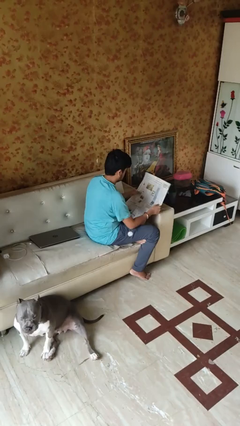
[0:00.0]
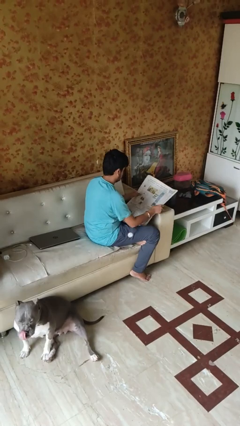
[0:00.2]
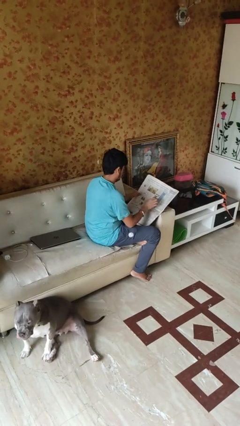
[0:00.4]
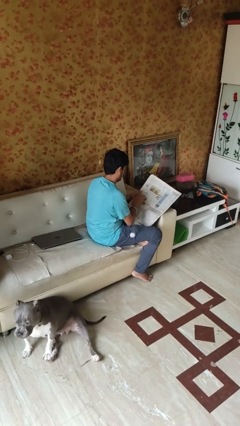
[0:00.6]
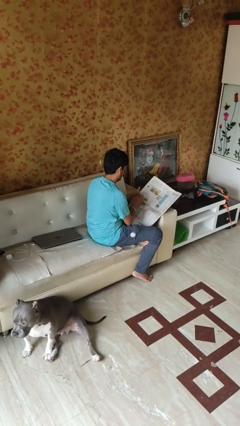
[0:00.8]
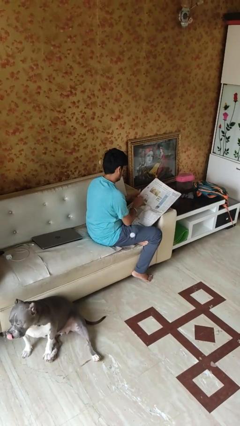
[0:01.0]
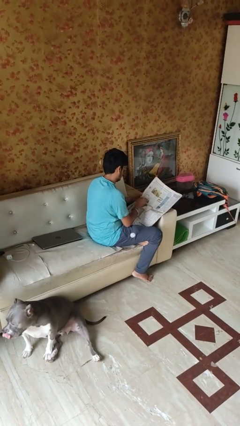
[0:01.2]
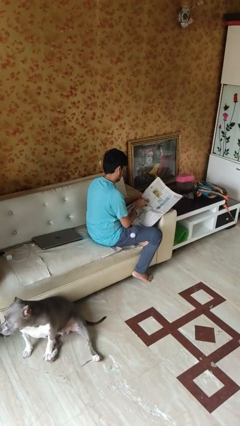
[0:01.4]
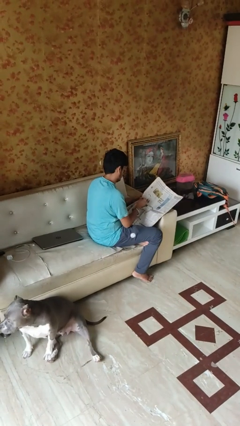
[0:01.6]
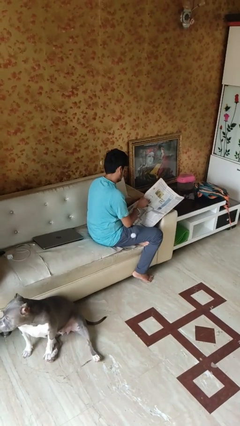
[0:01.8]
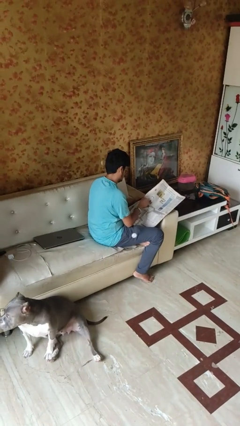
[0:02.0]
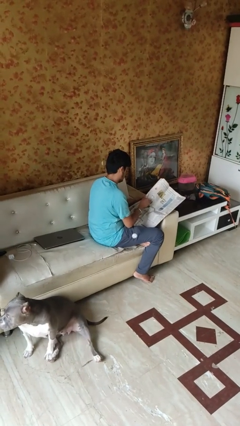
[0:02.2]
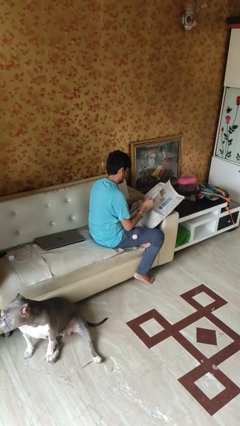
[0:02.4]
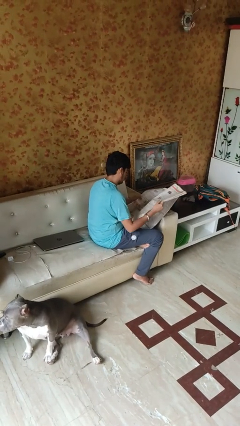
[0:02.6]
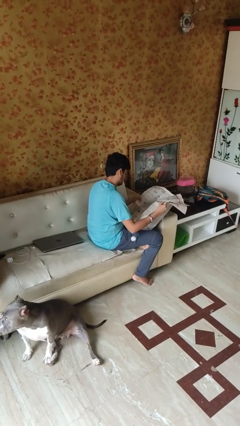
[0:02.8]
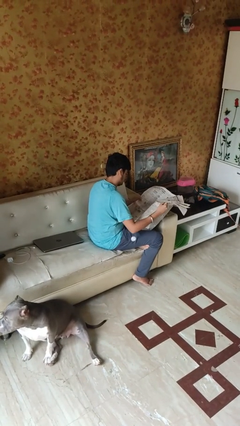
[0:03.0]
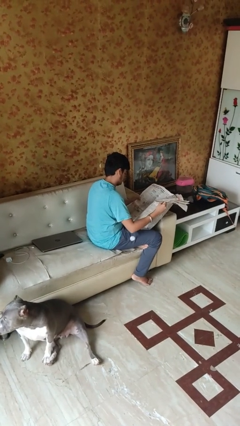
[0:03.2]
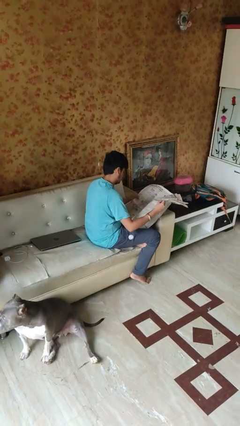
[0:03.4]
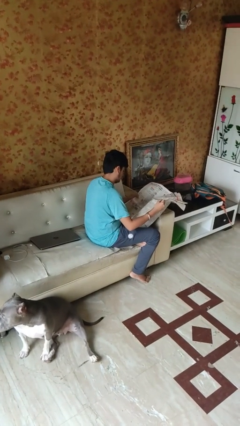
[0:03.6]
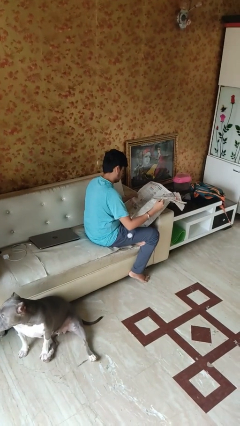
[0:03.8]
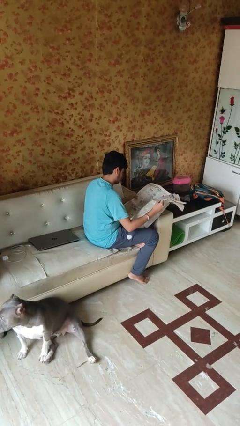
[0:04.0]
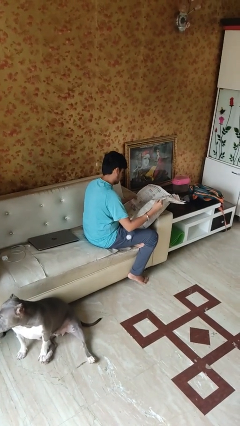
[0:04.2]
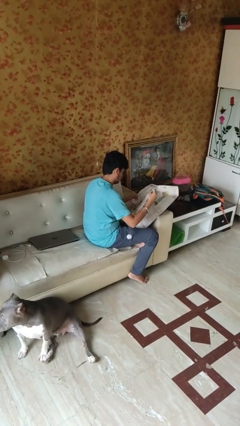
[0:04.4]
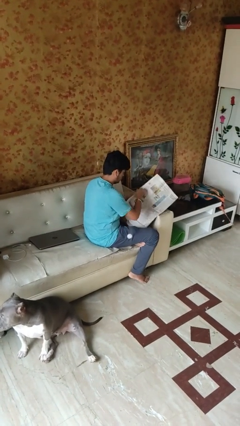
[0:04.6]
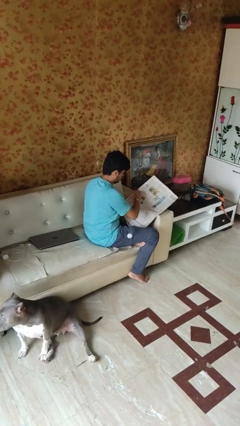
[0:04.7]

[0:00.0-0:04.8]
person reads newspaper

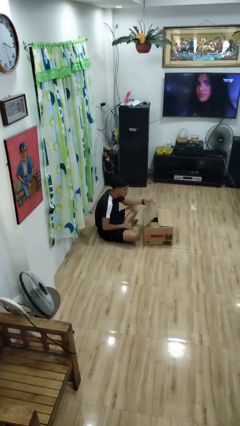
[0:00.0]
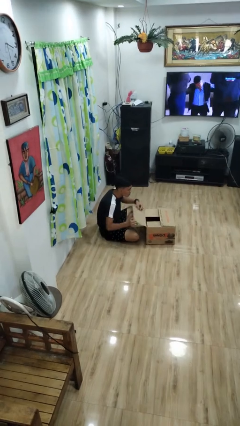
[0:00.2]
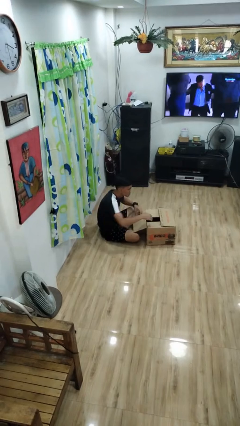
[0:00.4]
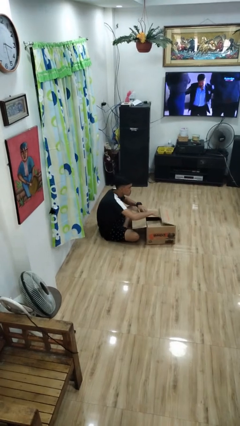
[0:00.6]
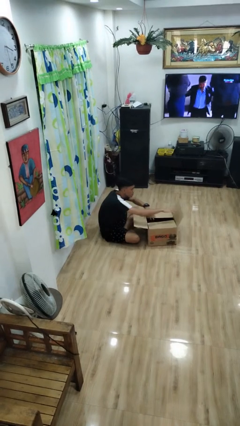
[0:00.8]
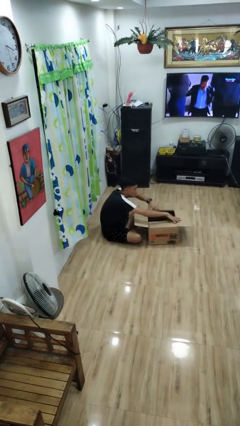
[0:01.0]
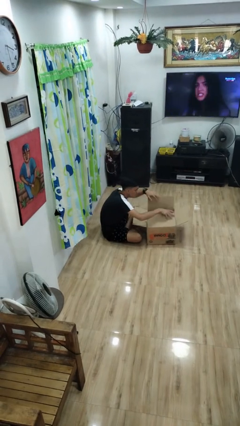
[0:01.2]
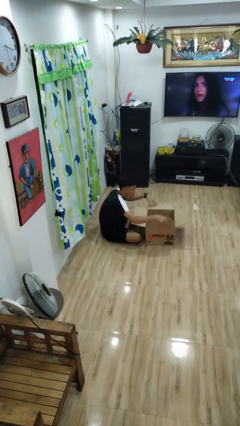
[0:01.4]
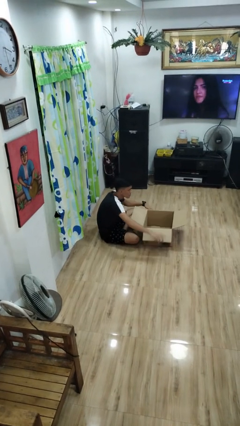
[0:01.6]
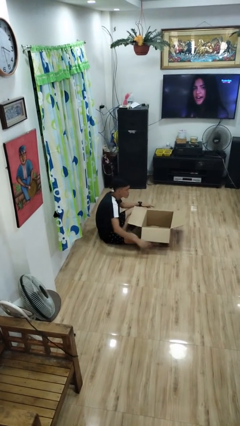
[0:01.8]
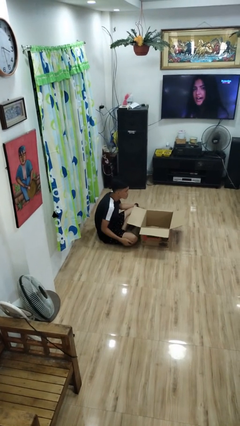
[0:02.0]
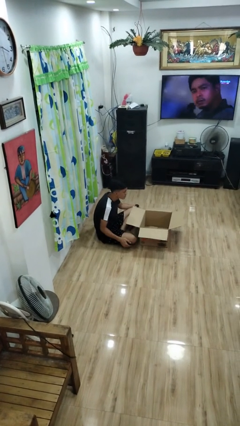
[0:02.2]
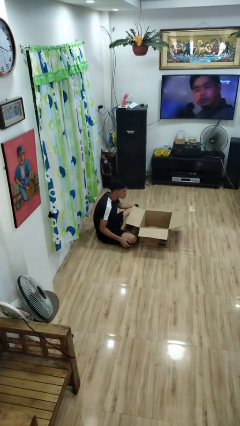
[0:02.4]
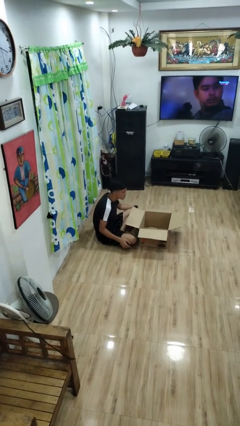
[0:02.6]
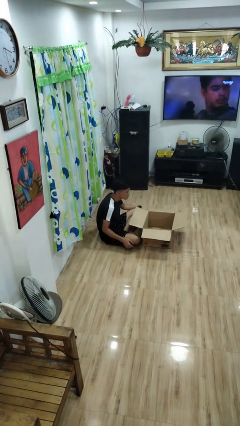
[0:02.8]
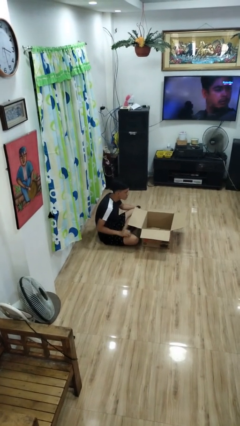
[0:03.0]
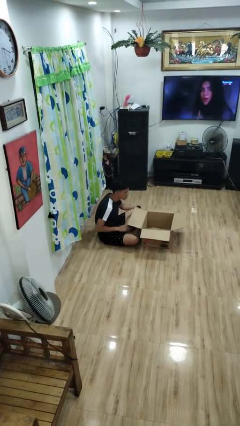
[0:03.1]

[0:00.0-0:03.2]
person opens box

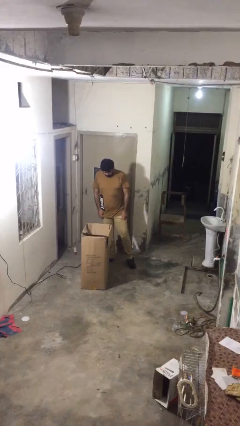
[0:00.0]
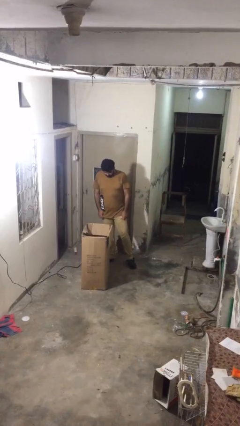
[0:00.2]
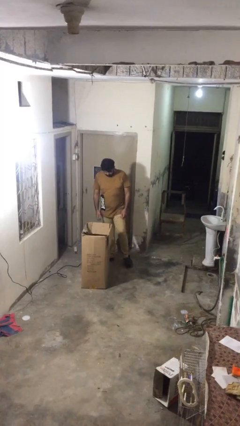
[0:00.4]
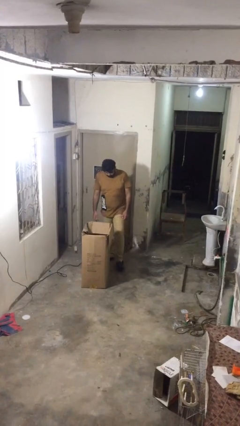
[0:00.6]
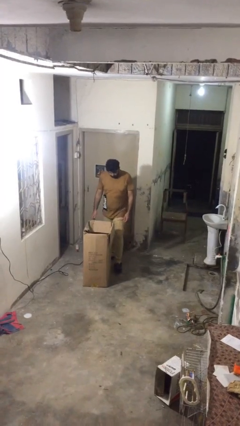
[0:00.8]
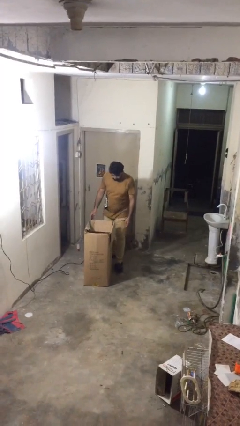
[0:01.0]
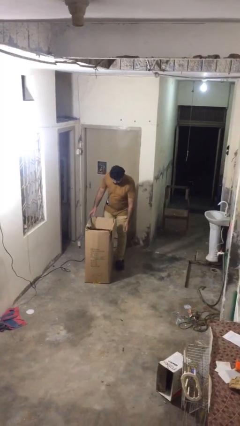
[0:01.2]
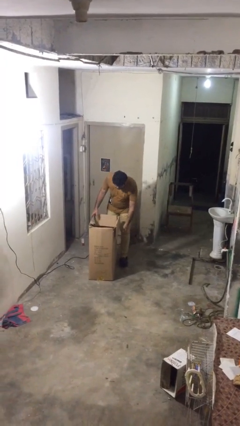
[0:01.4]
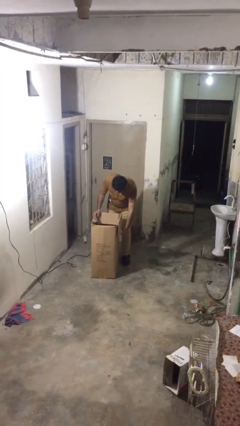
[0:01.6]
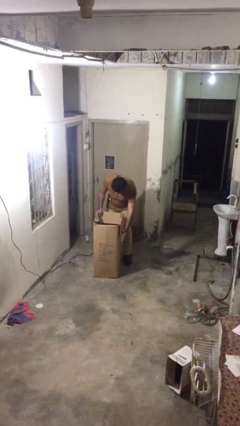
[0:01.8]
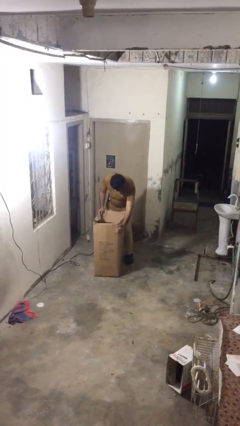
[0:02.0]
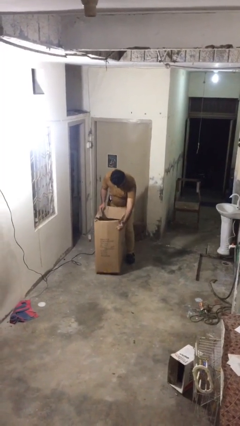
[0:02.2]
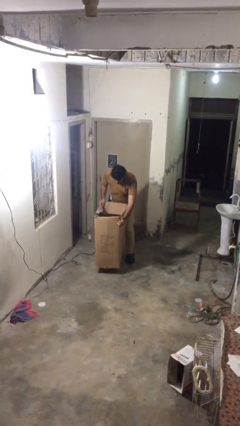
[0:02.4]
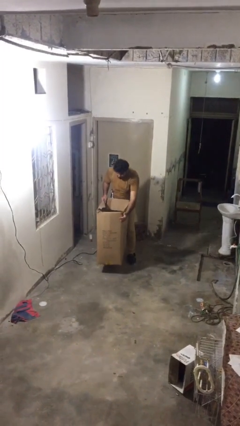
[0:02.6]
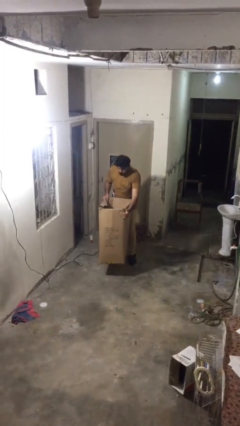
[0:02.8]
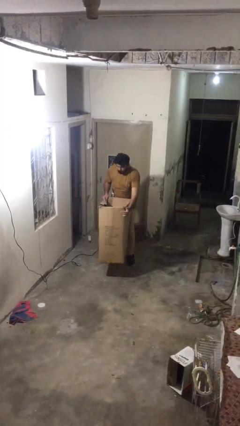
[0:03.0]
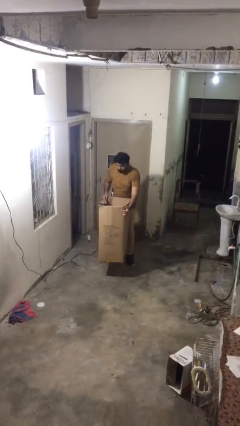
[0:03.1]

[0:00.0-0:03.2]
person picks up object from floor

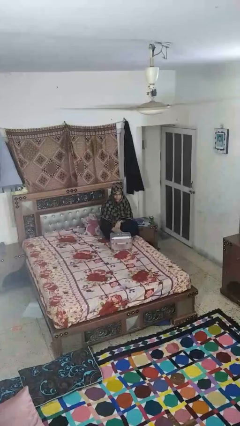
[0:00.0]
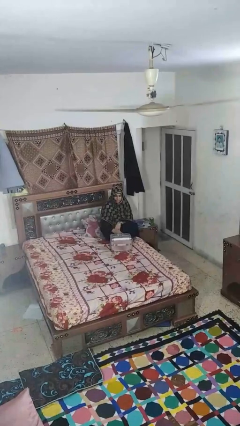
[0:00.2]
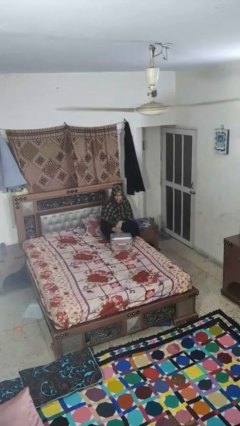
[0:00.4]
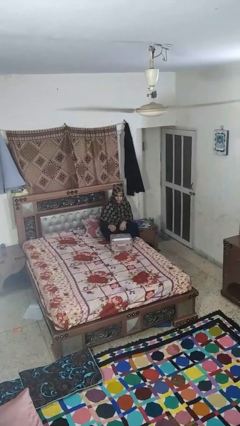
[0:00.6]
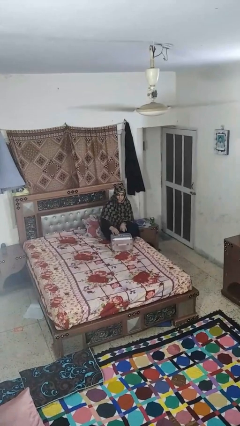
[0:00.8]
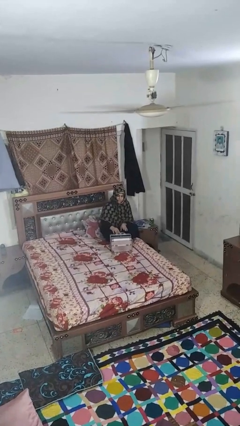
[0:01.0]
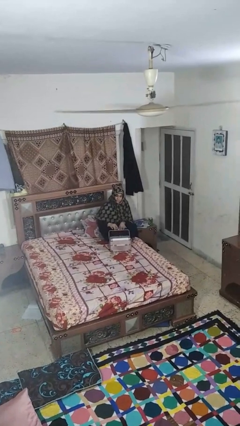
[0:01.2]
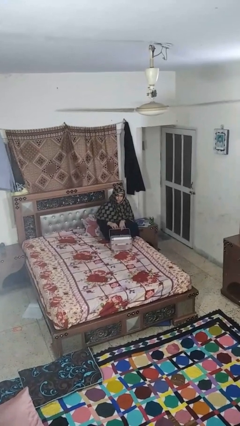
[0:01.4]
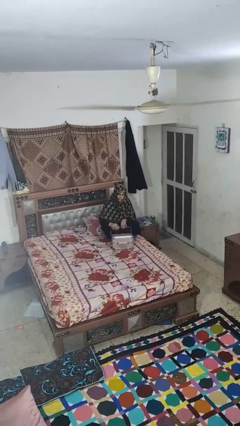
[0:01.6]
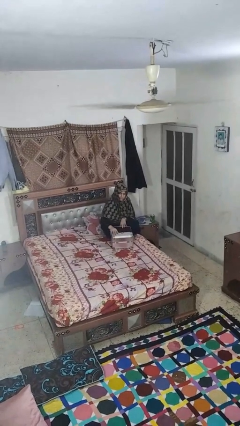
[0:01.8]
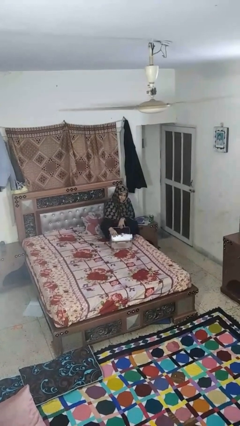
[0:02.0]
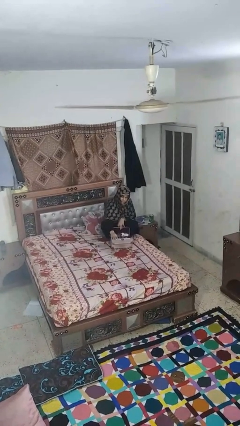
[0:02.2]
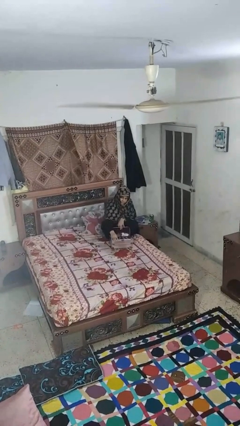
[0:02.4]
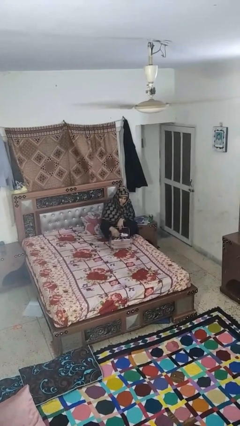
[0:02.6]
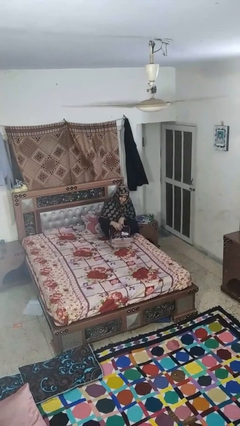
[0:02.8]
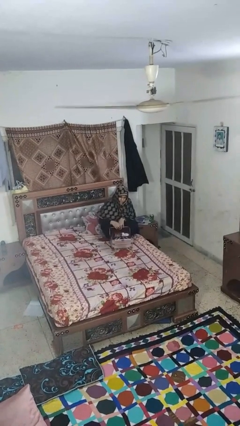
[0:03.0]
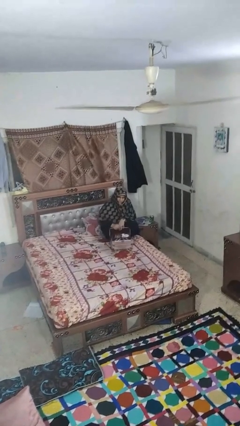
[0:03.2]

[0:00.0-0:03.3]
person opens jewelry box

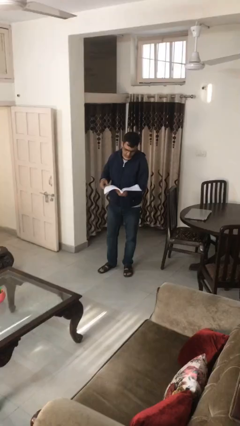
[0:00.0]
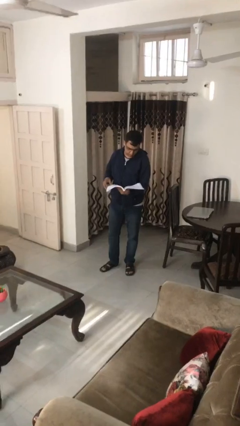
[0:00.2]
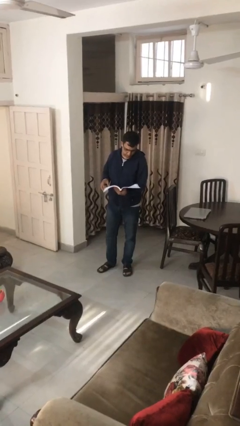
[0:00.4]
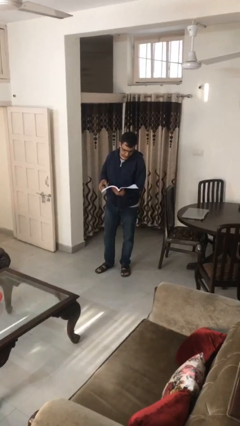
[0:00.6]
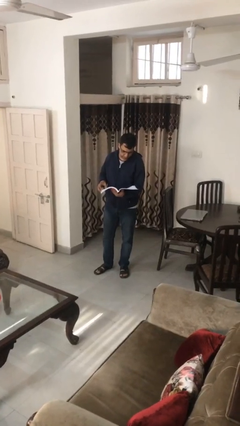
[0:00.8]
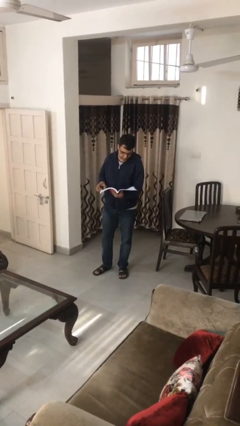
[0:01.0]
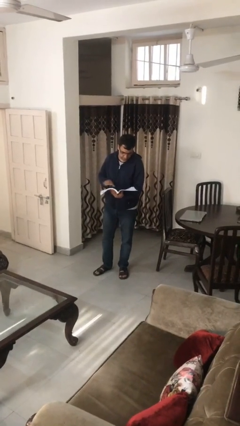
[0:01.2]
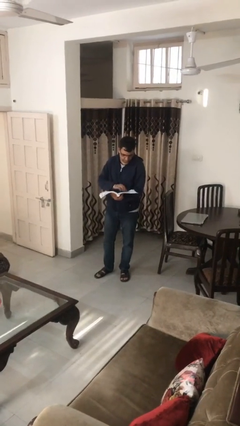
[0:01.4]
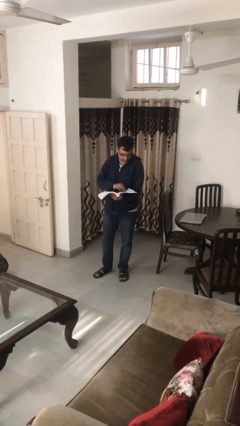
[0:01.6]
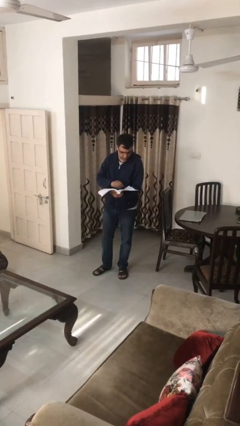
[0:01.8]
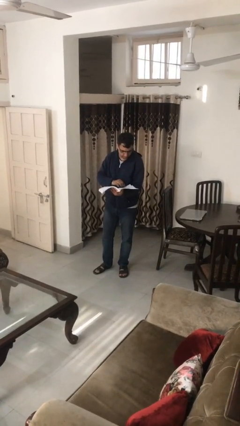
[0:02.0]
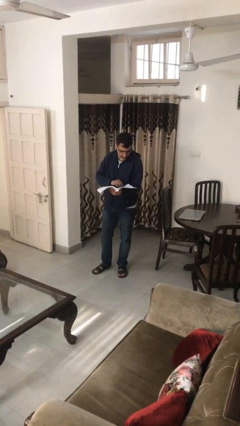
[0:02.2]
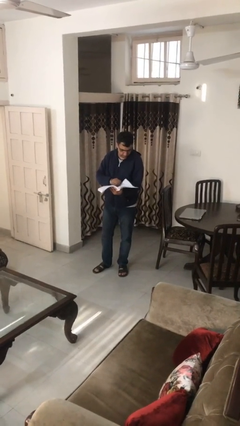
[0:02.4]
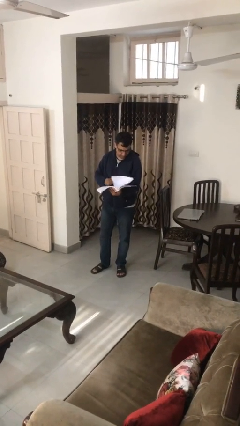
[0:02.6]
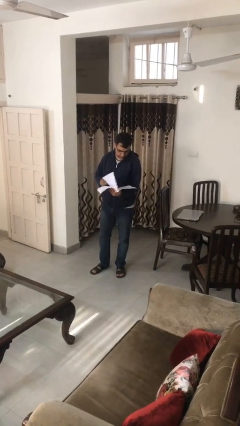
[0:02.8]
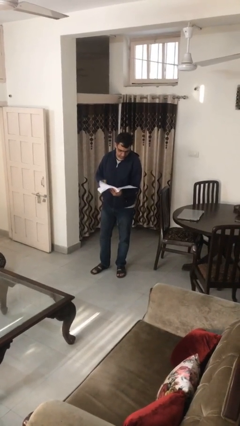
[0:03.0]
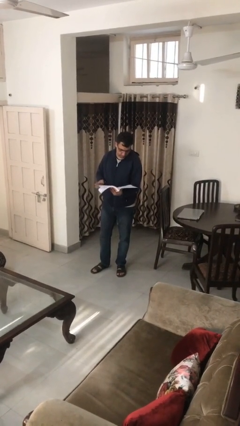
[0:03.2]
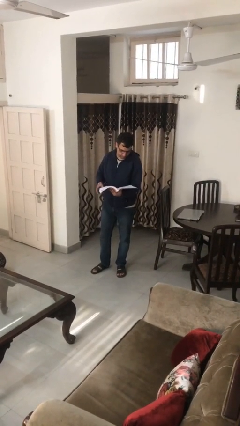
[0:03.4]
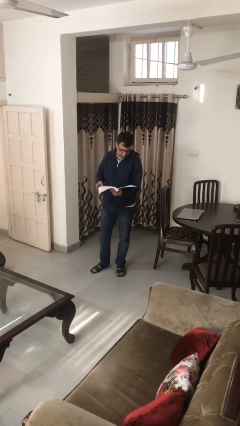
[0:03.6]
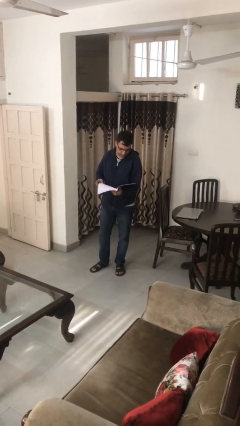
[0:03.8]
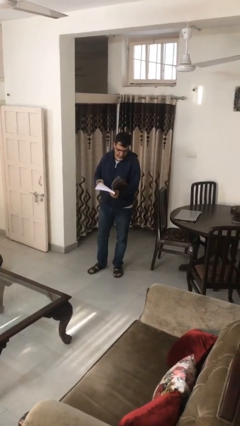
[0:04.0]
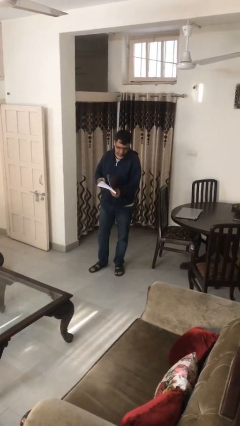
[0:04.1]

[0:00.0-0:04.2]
person reads document
